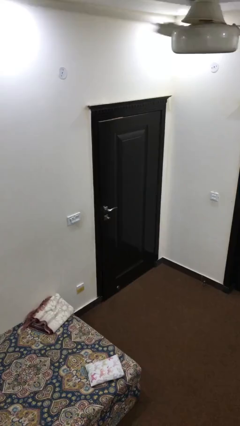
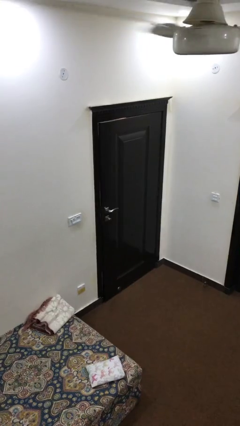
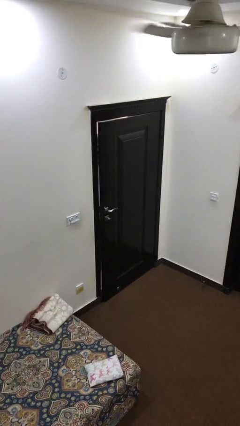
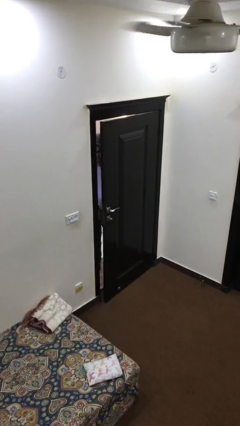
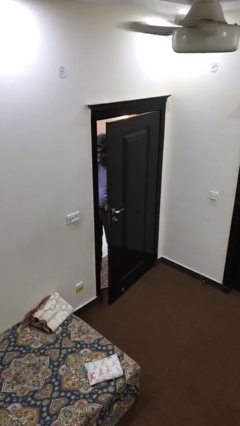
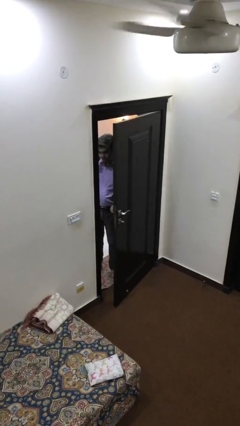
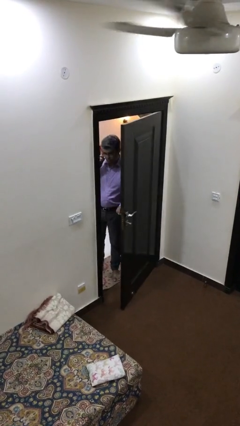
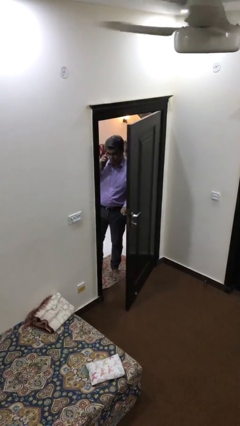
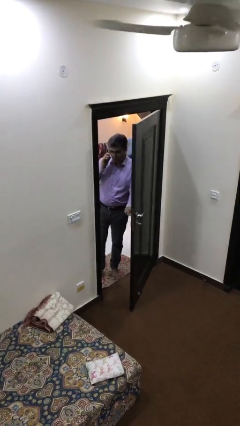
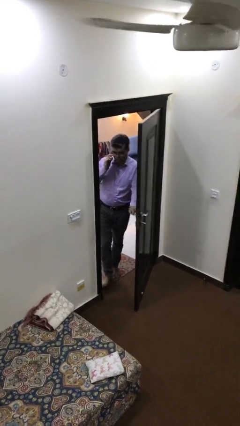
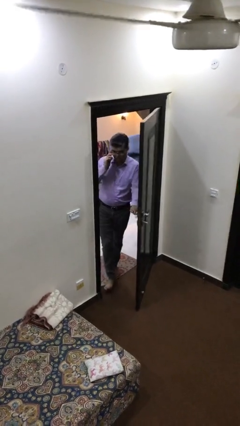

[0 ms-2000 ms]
person opens facility door

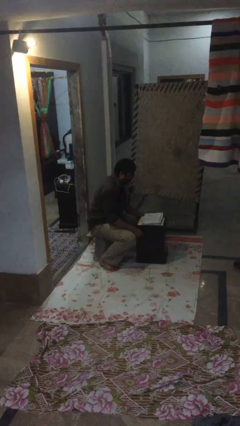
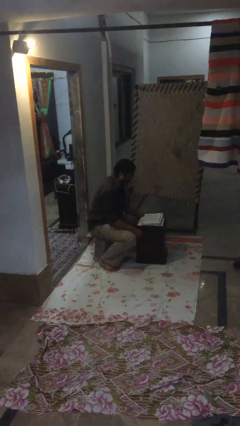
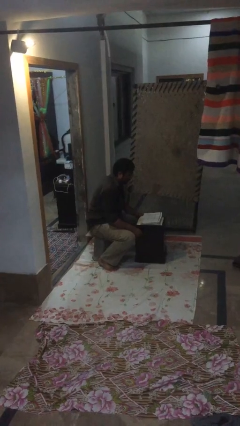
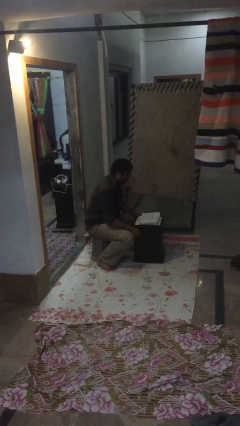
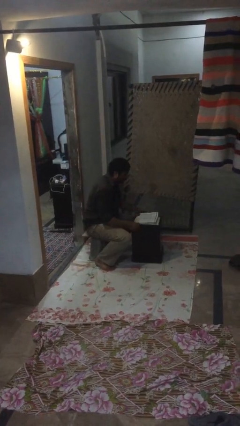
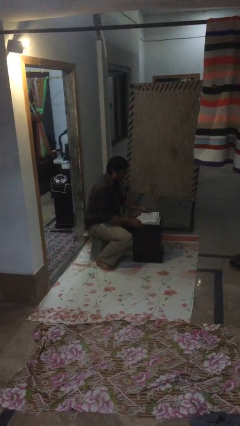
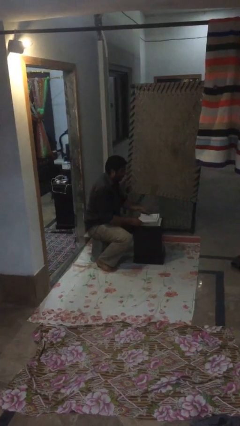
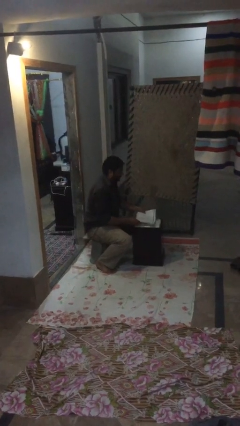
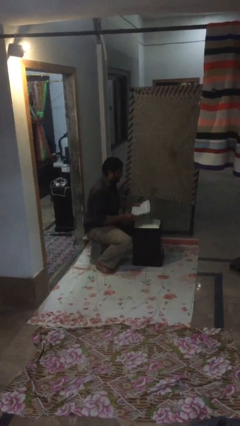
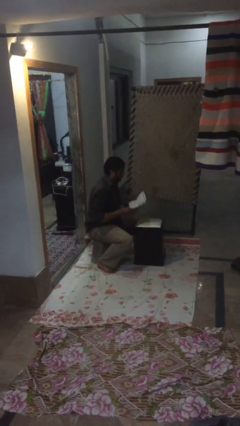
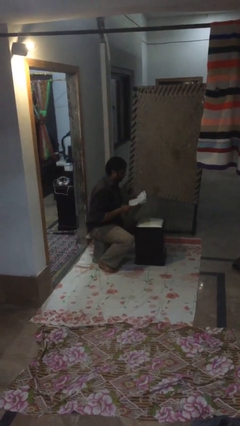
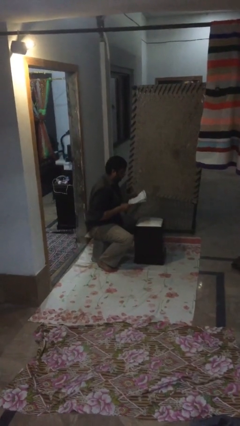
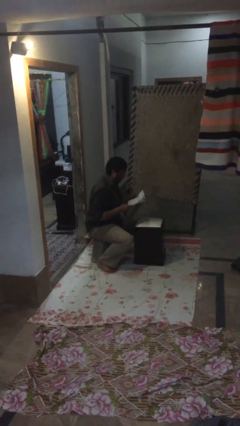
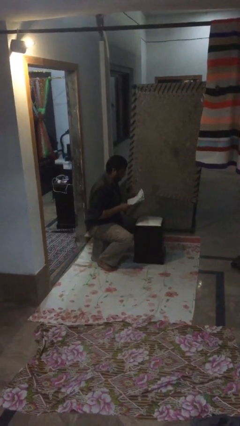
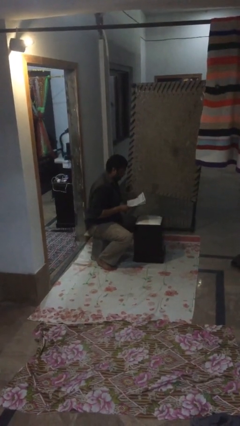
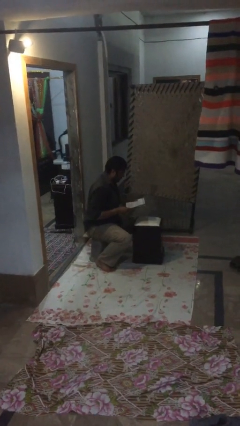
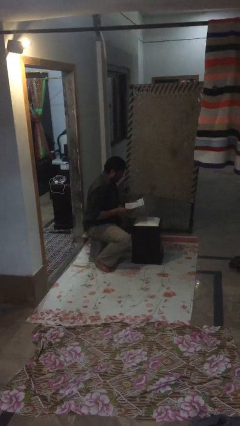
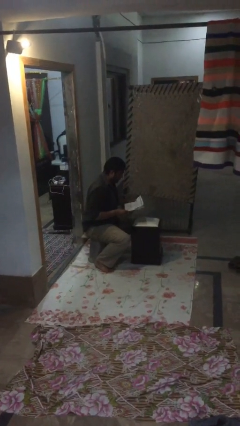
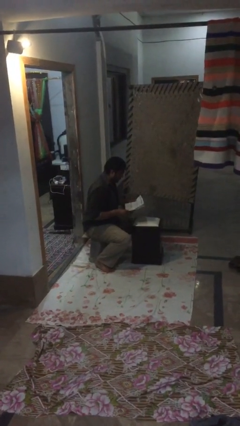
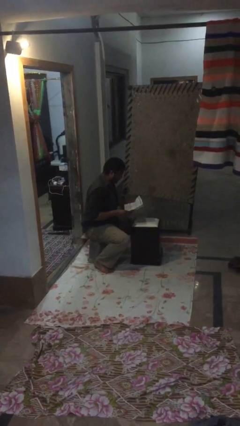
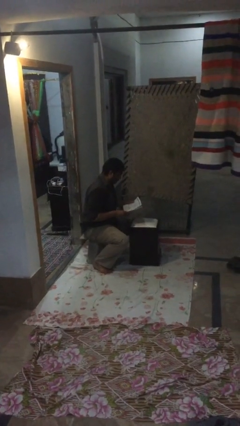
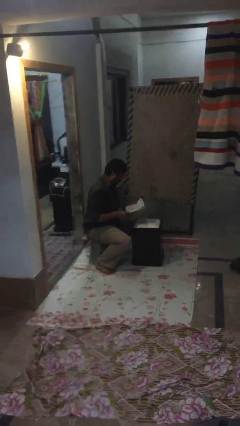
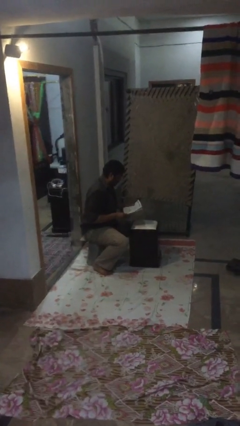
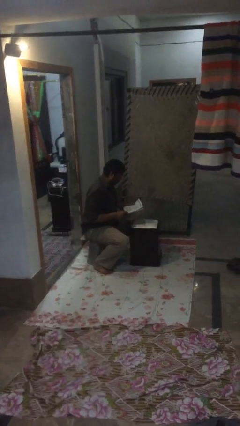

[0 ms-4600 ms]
person picks up object from table

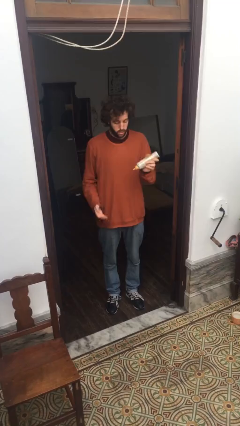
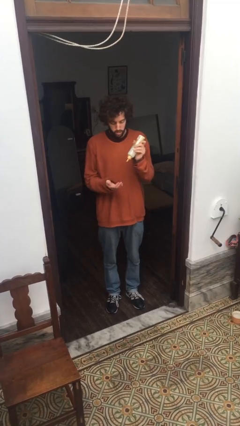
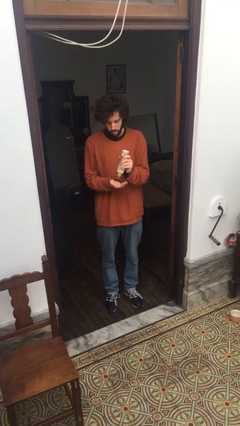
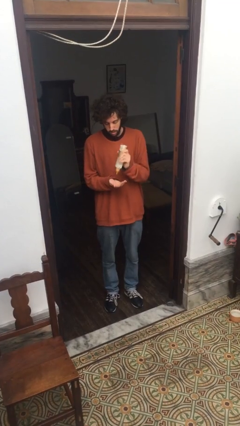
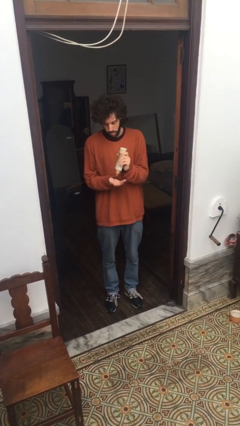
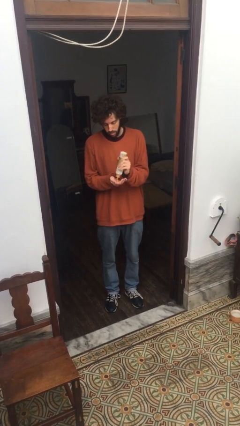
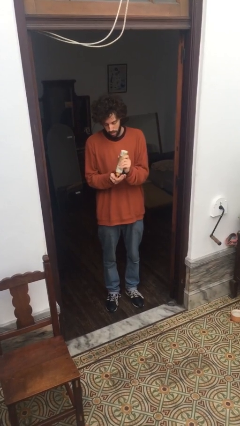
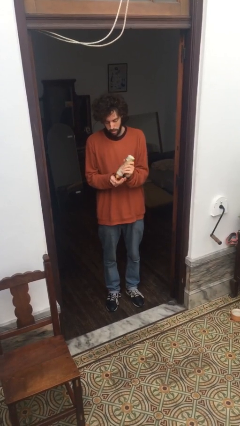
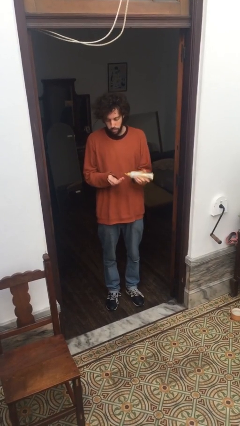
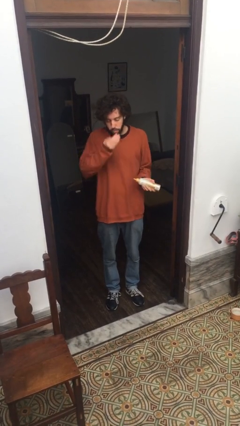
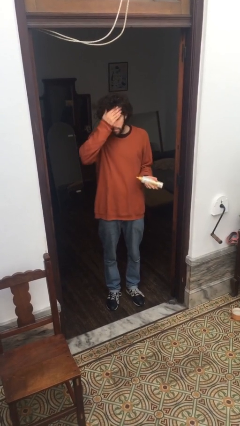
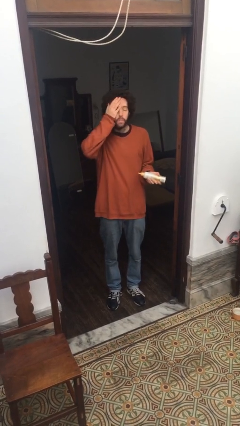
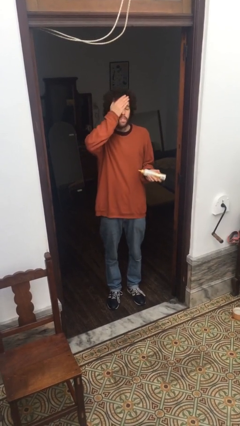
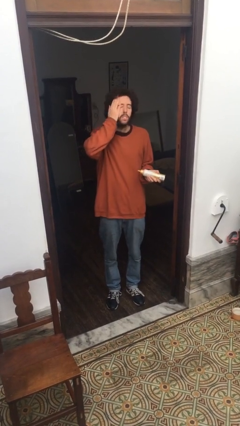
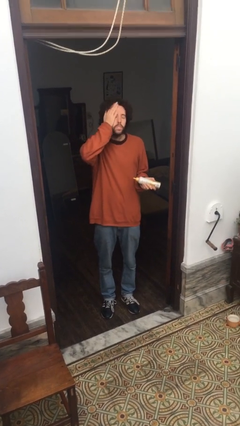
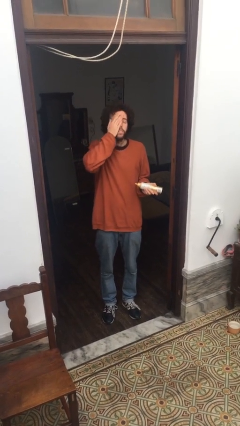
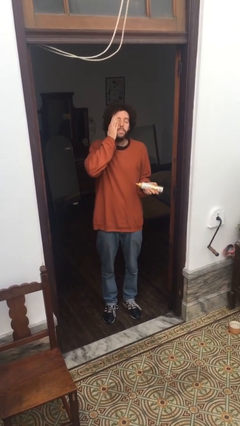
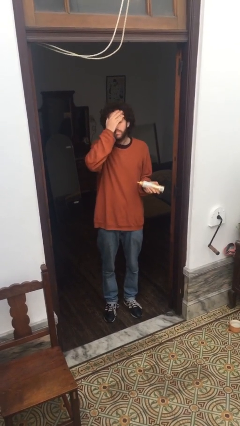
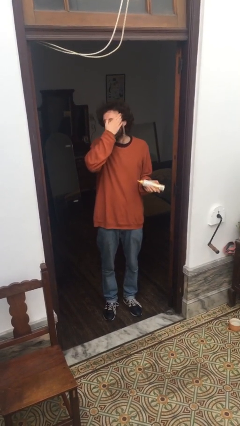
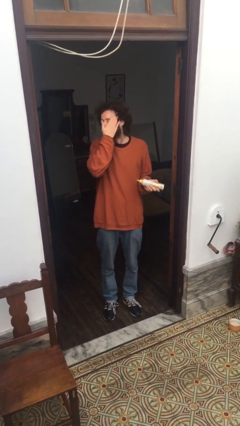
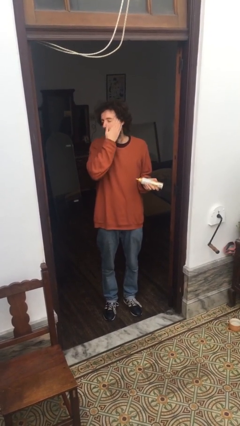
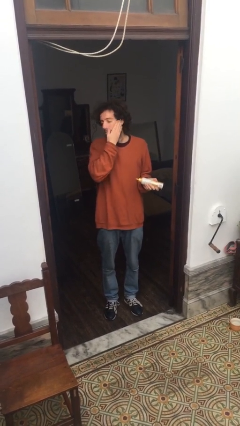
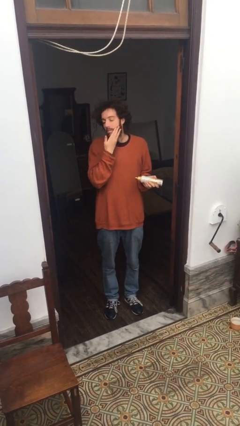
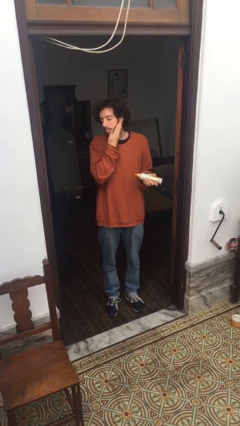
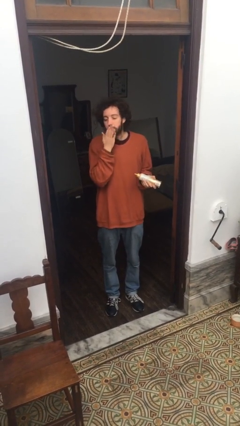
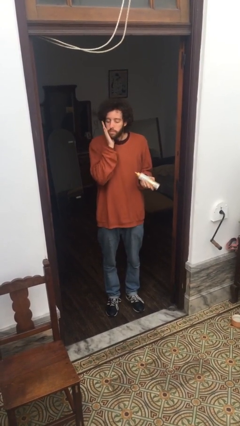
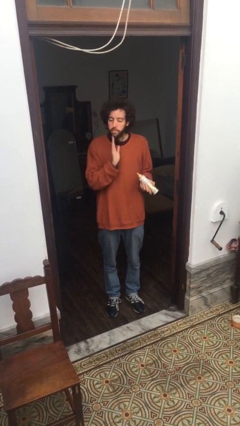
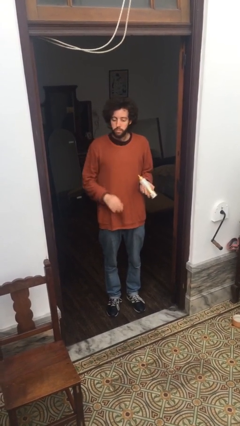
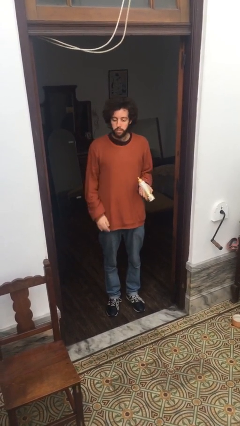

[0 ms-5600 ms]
person applies facial moisturizer

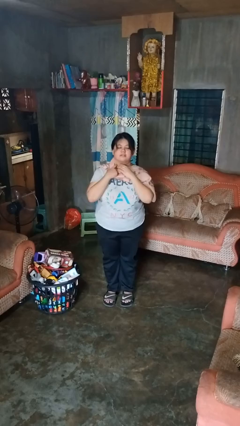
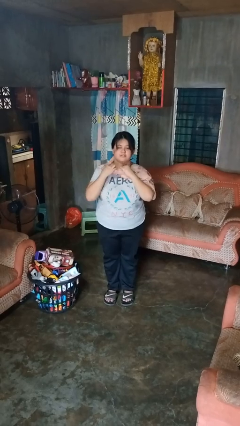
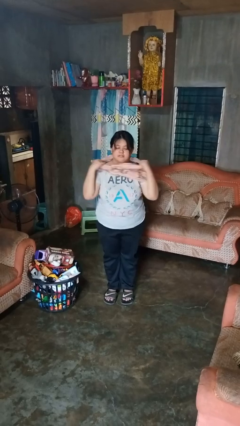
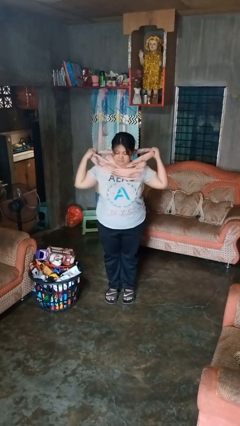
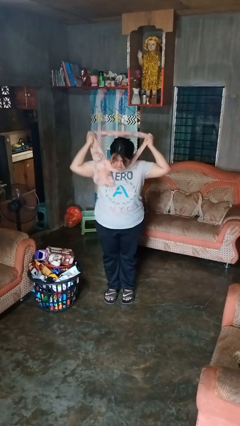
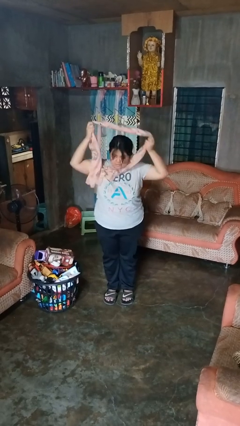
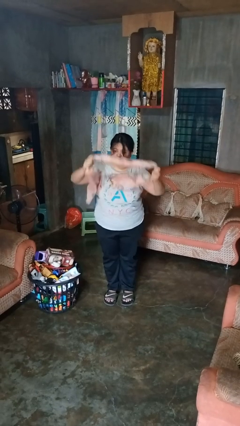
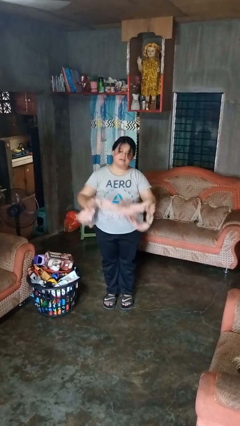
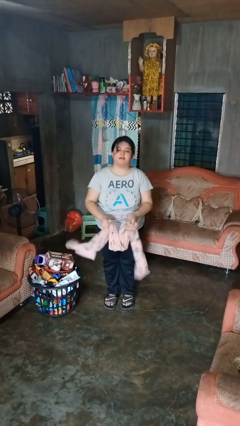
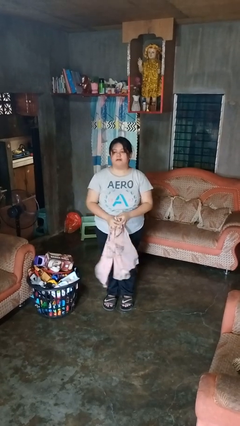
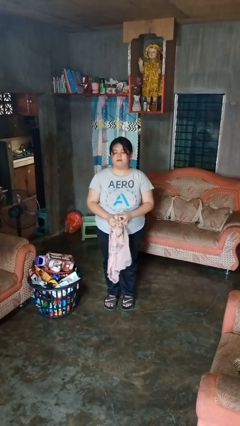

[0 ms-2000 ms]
person takes off scarf

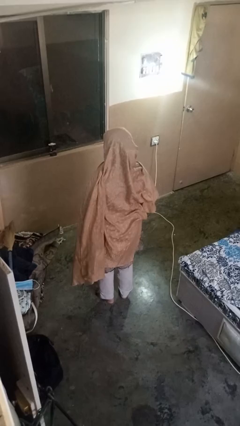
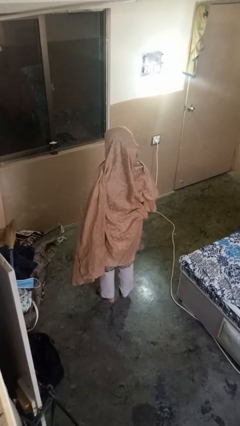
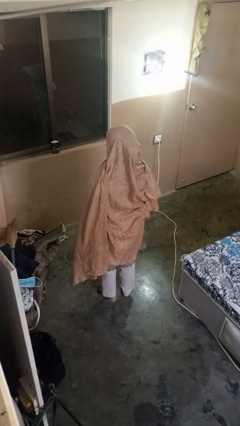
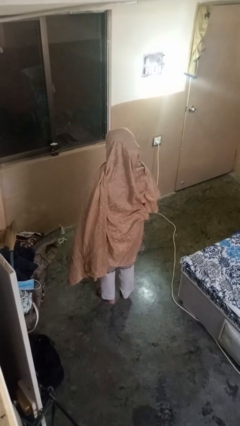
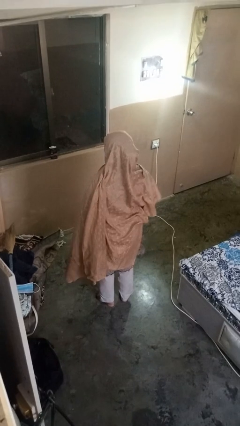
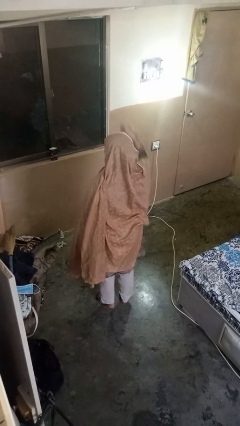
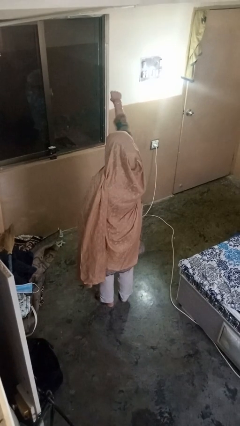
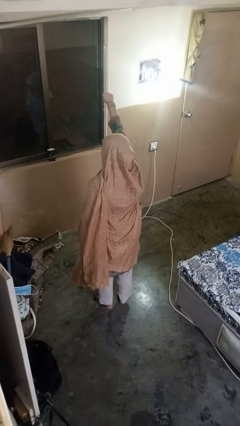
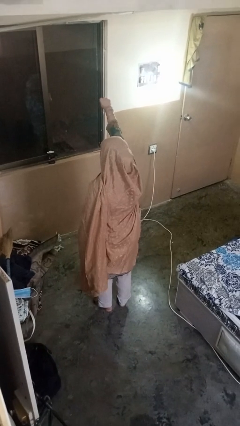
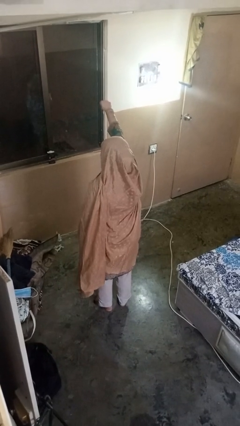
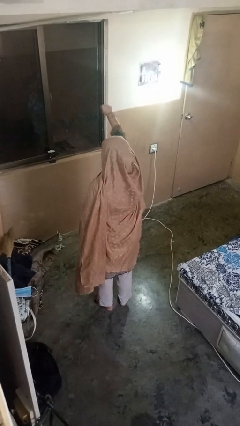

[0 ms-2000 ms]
person punches

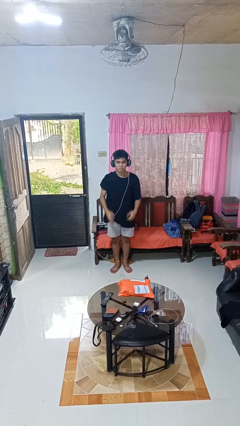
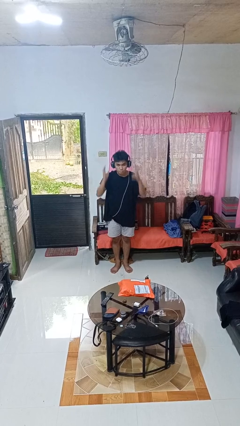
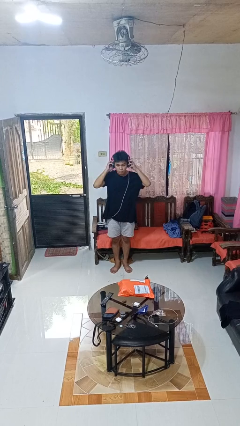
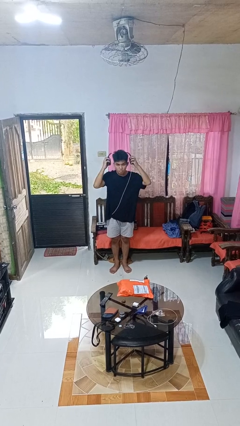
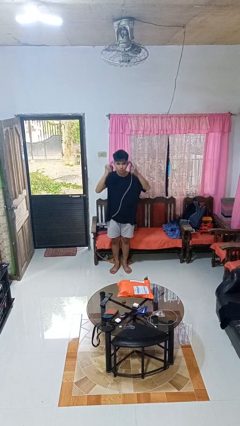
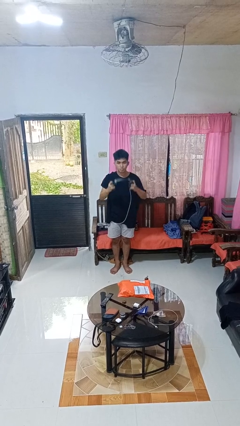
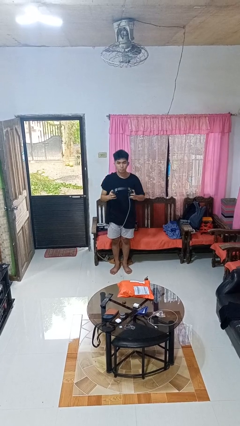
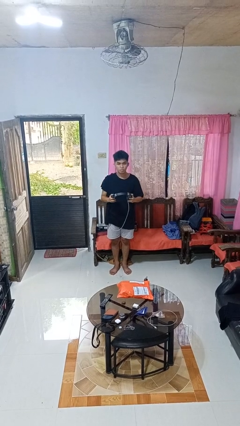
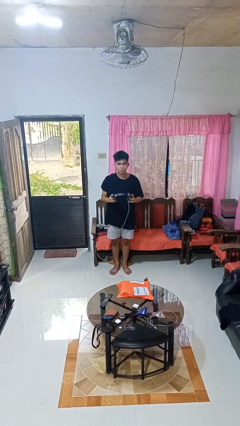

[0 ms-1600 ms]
person takes off headphones
